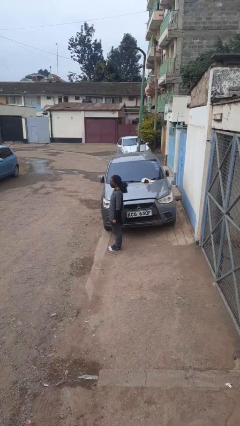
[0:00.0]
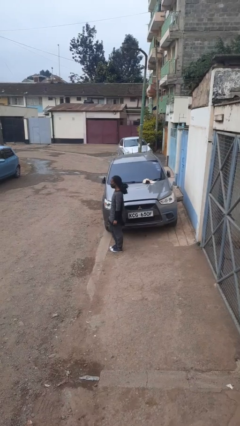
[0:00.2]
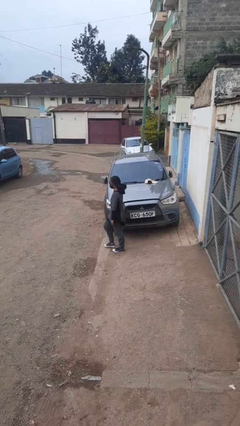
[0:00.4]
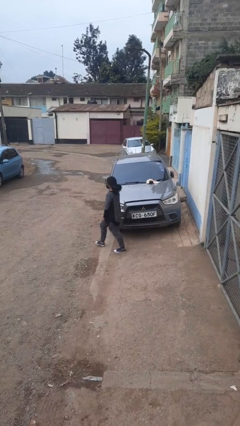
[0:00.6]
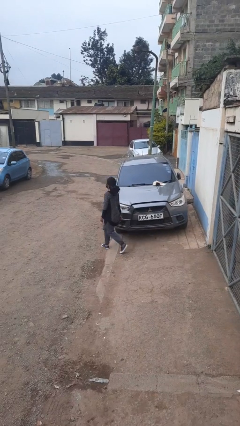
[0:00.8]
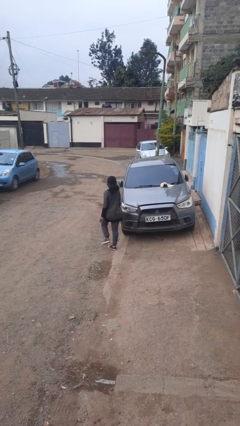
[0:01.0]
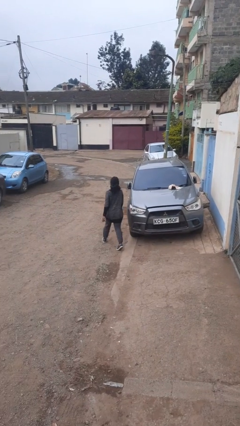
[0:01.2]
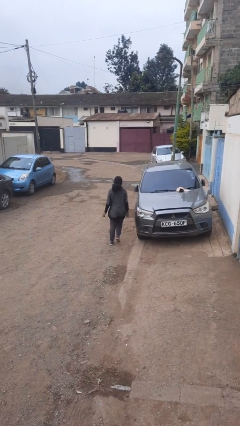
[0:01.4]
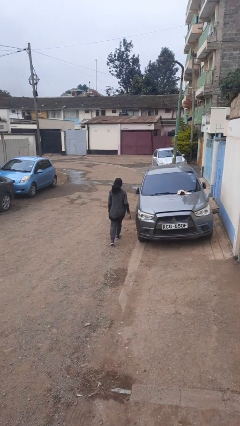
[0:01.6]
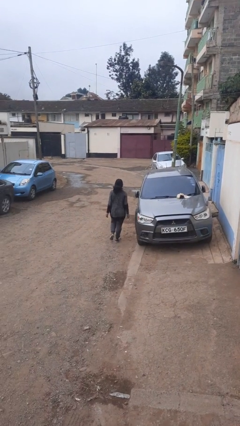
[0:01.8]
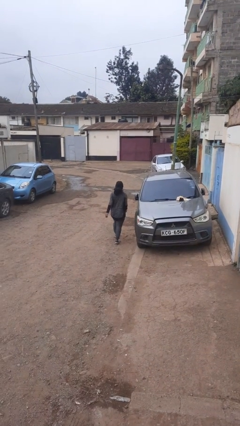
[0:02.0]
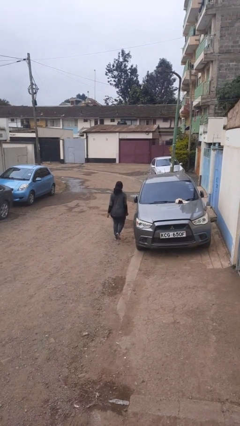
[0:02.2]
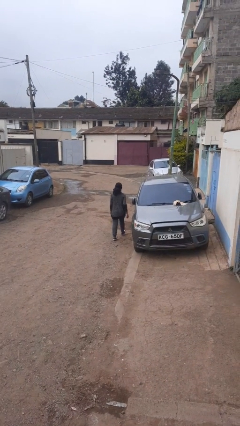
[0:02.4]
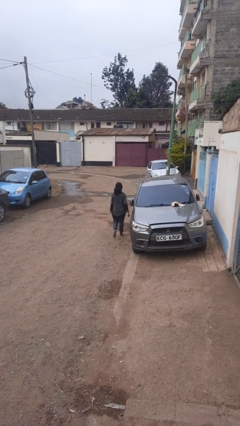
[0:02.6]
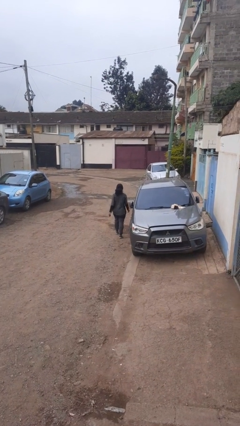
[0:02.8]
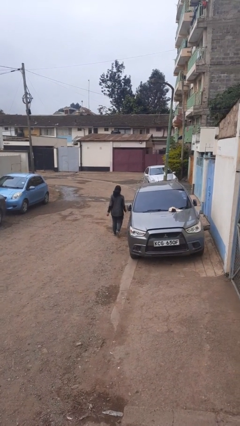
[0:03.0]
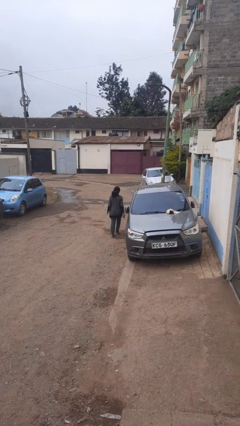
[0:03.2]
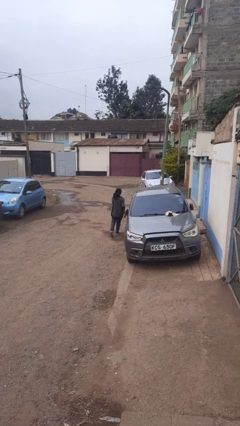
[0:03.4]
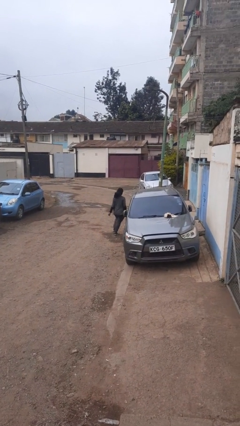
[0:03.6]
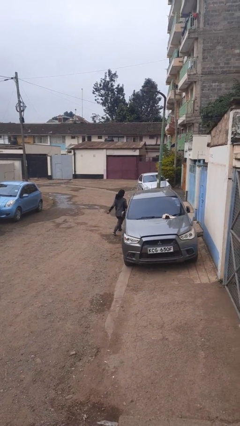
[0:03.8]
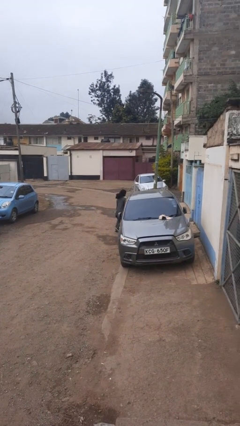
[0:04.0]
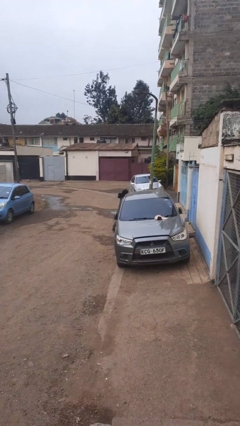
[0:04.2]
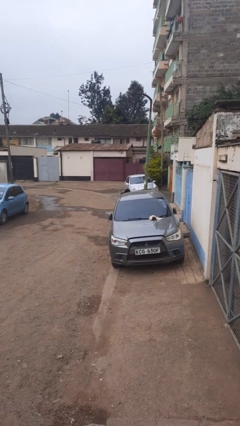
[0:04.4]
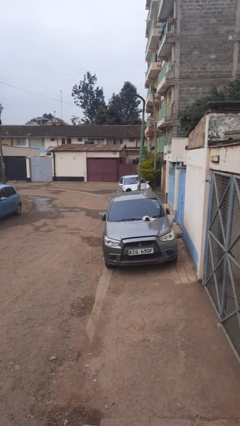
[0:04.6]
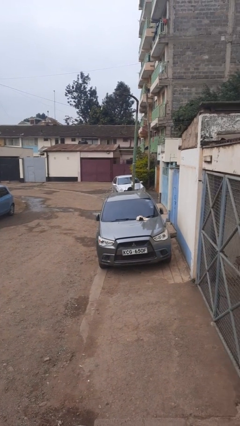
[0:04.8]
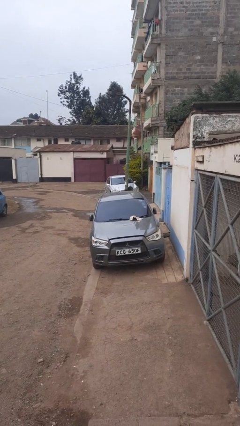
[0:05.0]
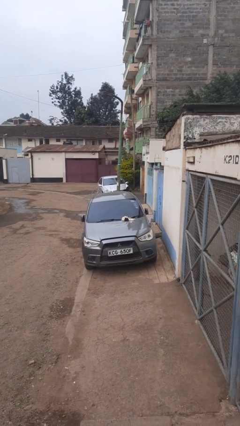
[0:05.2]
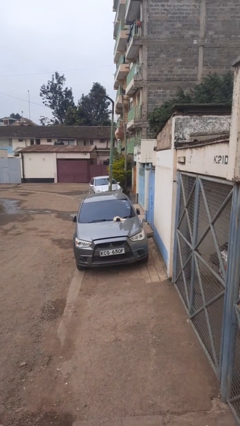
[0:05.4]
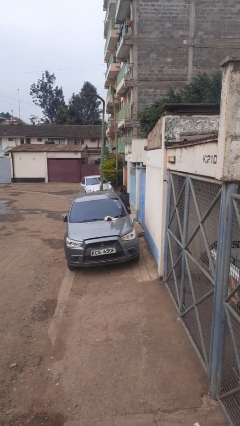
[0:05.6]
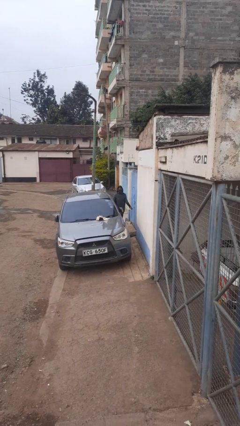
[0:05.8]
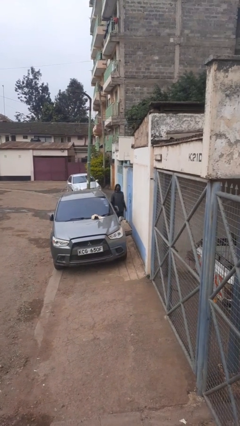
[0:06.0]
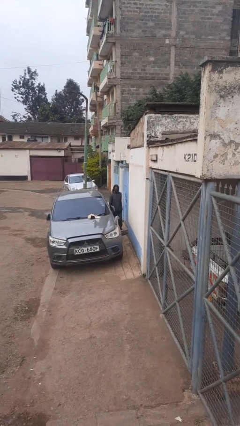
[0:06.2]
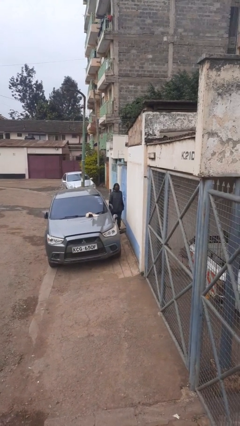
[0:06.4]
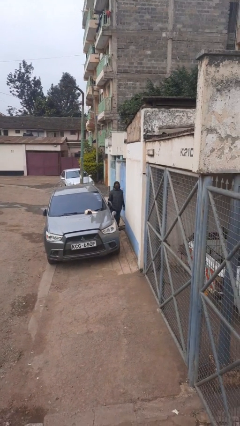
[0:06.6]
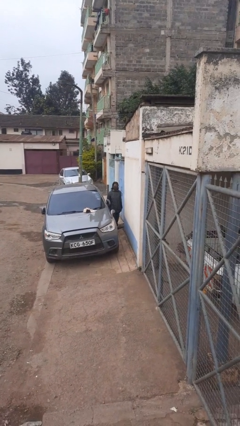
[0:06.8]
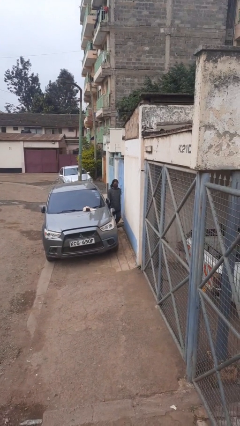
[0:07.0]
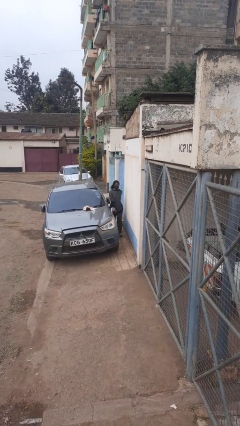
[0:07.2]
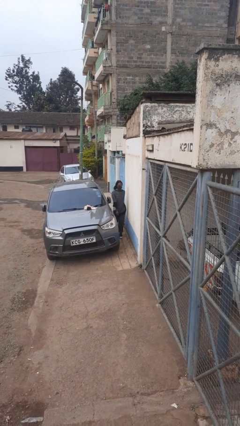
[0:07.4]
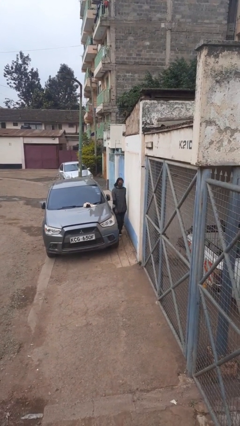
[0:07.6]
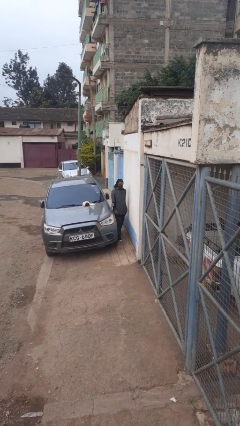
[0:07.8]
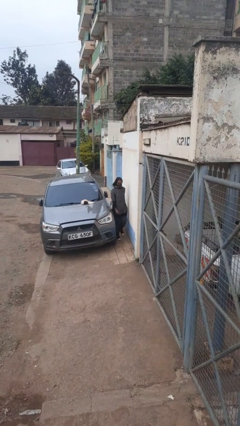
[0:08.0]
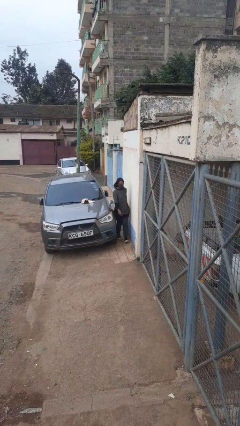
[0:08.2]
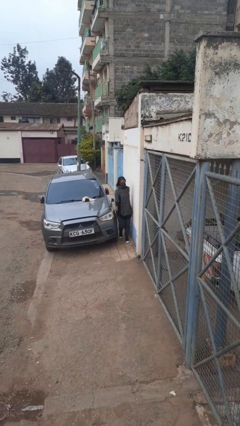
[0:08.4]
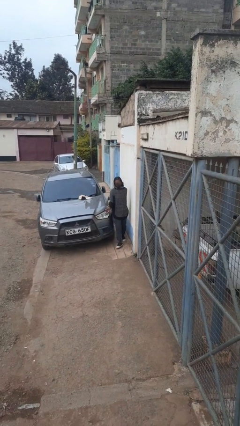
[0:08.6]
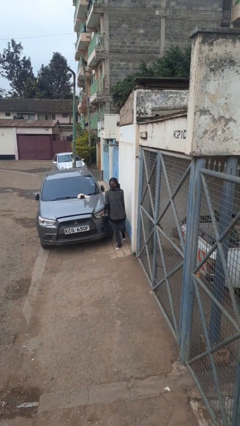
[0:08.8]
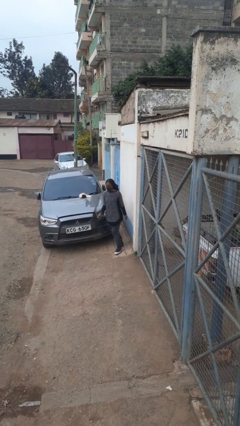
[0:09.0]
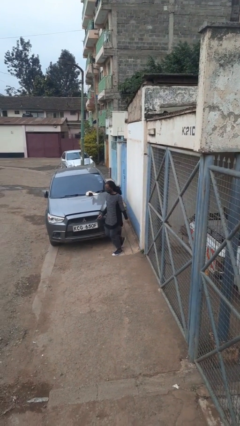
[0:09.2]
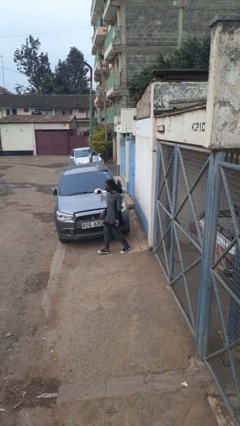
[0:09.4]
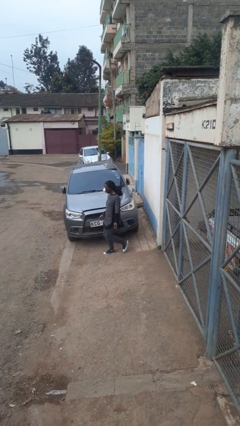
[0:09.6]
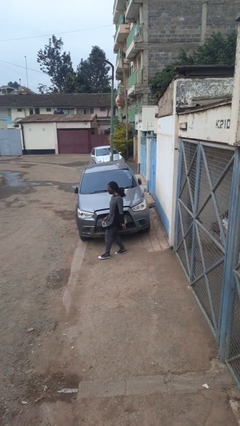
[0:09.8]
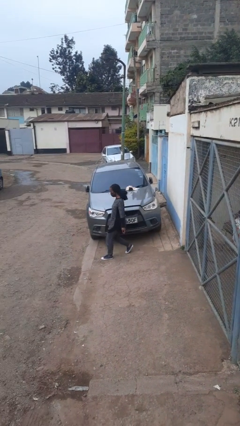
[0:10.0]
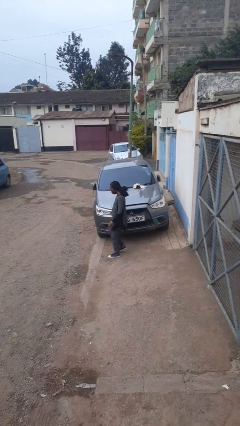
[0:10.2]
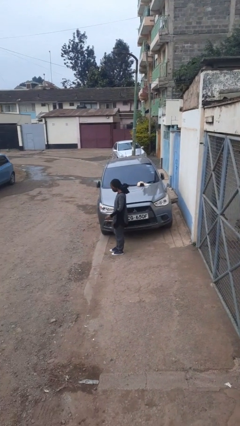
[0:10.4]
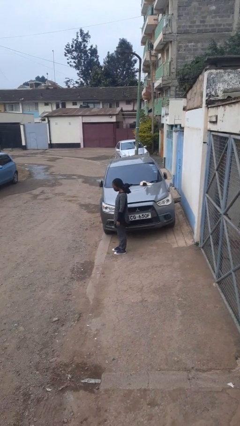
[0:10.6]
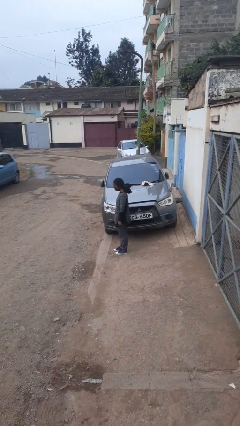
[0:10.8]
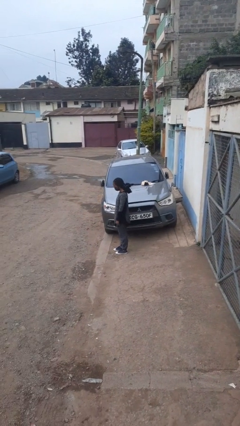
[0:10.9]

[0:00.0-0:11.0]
person walks around car

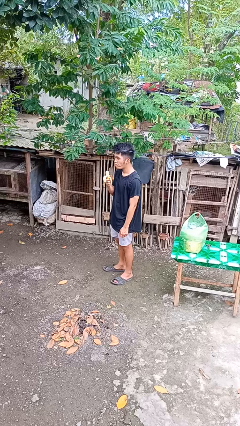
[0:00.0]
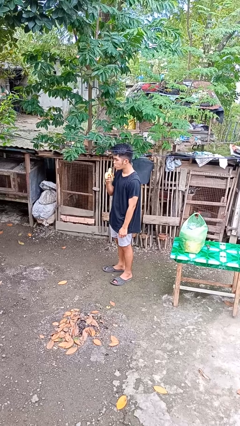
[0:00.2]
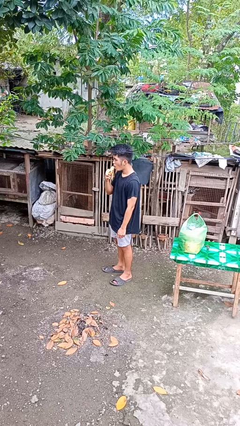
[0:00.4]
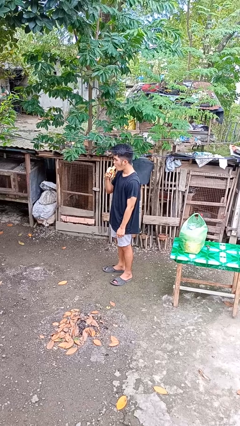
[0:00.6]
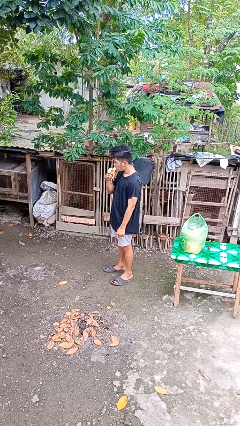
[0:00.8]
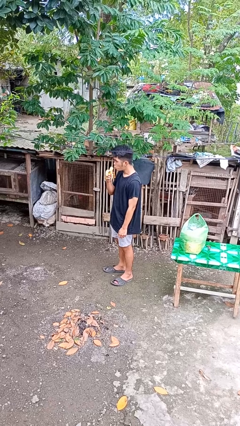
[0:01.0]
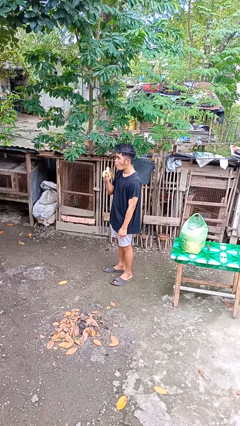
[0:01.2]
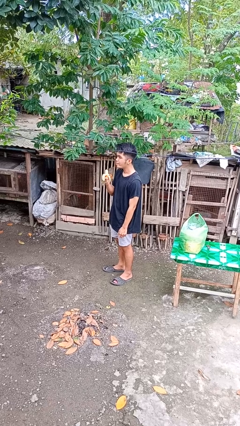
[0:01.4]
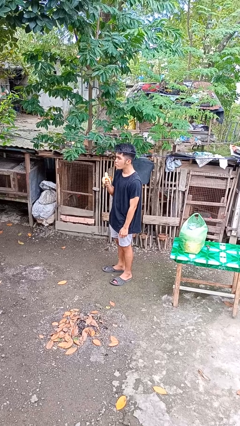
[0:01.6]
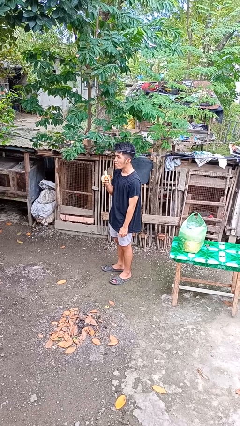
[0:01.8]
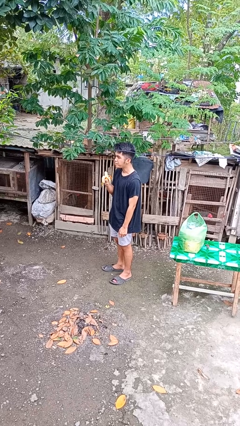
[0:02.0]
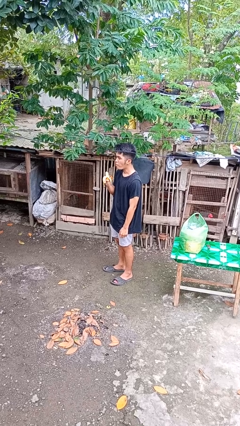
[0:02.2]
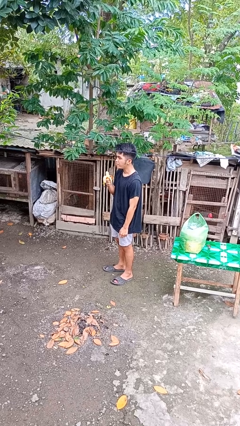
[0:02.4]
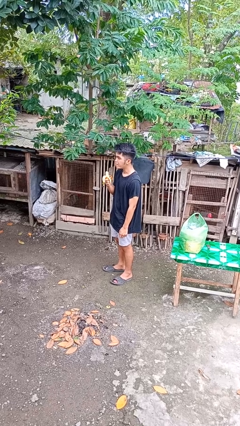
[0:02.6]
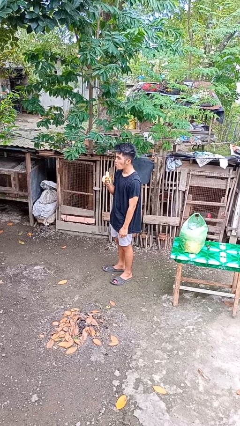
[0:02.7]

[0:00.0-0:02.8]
person eats banana

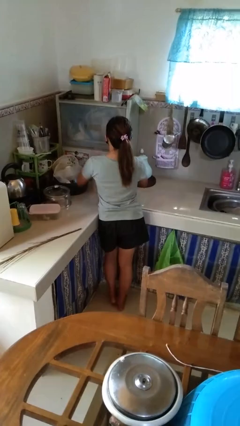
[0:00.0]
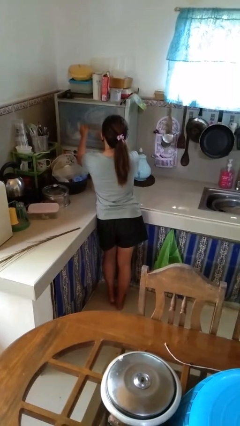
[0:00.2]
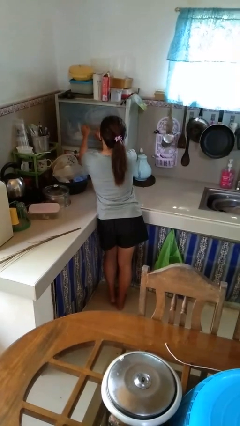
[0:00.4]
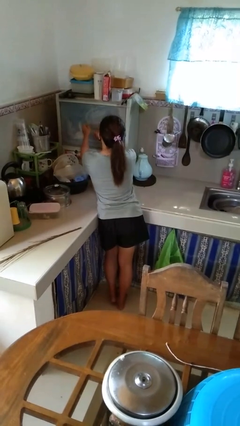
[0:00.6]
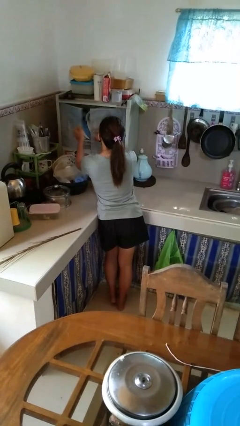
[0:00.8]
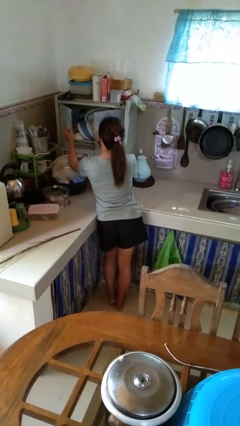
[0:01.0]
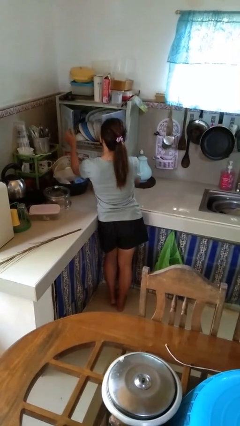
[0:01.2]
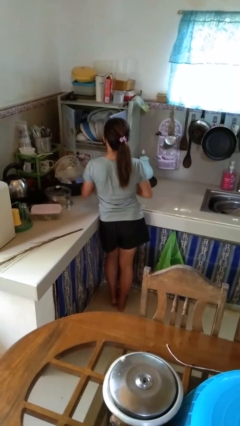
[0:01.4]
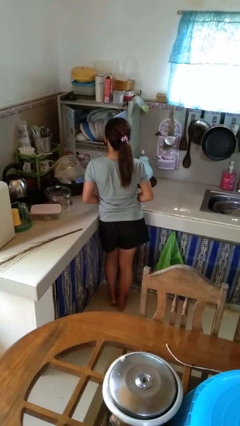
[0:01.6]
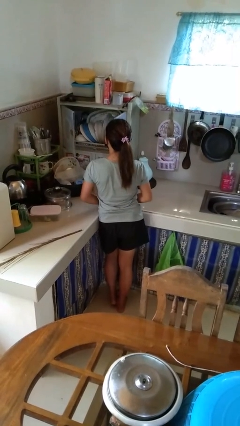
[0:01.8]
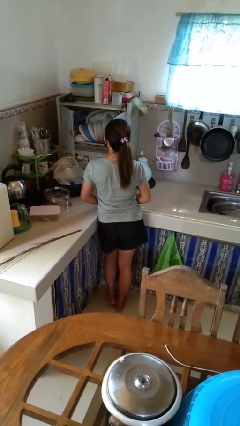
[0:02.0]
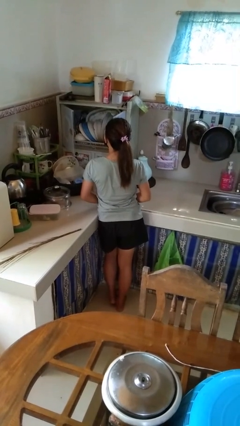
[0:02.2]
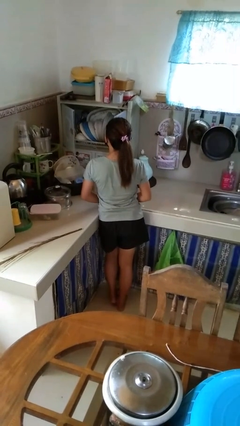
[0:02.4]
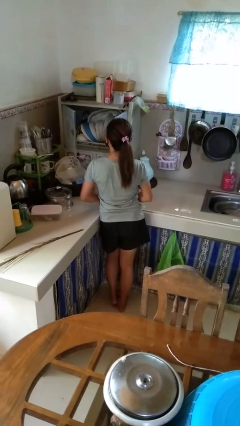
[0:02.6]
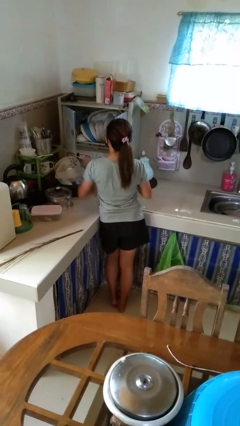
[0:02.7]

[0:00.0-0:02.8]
person opens kitchen drawer

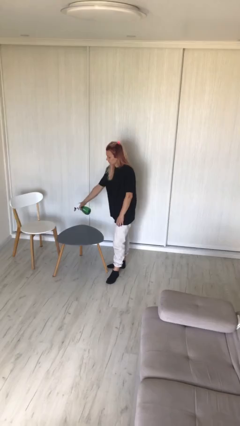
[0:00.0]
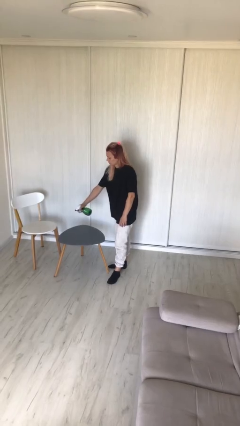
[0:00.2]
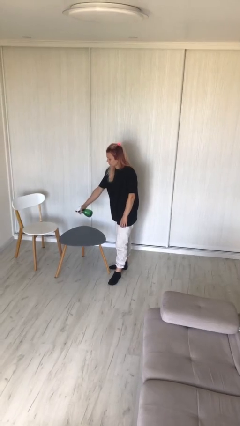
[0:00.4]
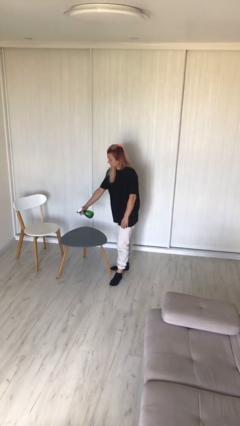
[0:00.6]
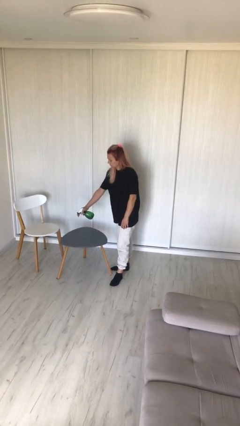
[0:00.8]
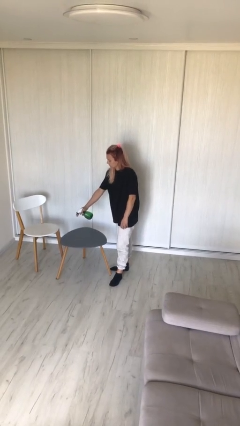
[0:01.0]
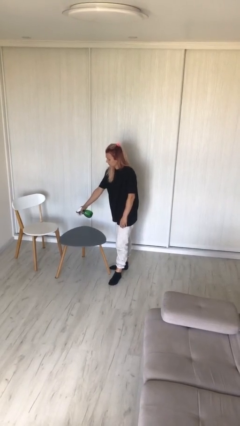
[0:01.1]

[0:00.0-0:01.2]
person sprays from bottle
